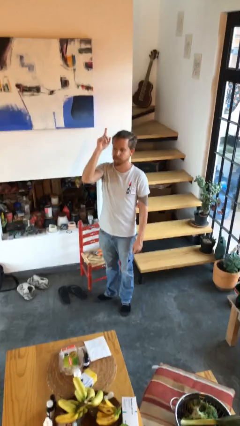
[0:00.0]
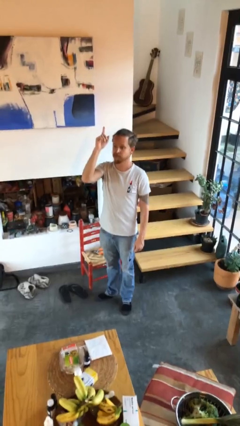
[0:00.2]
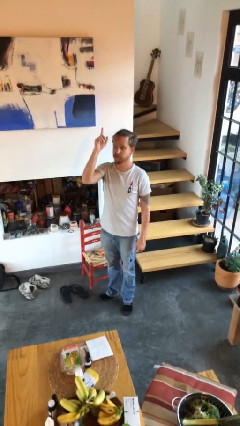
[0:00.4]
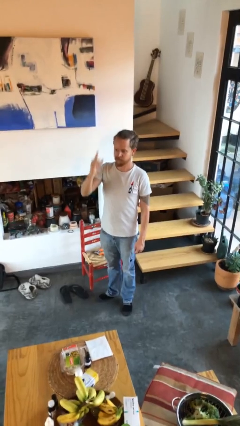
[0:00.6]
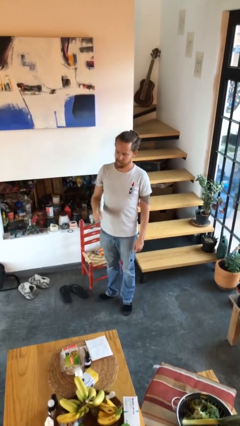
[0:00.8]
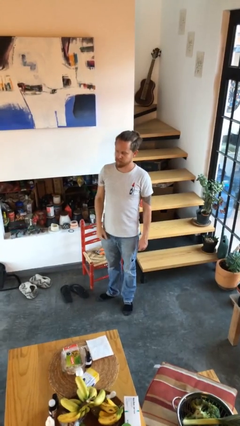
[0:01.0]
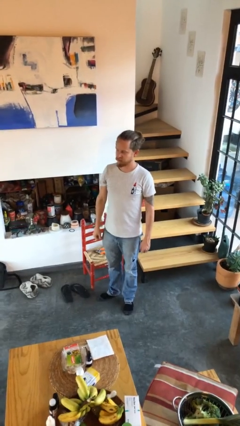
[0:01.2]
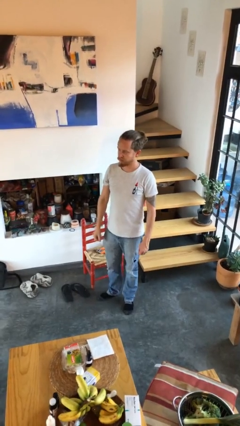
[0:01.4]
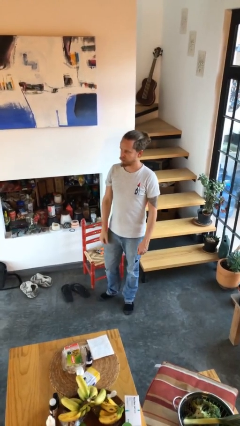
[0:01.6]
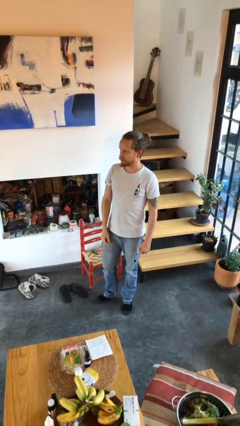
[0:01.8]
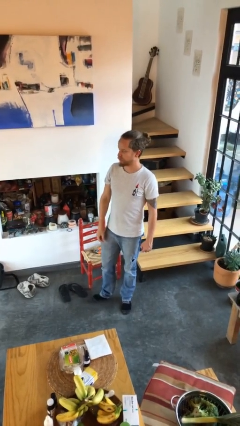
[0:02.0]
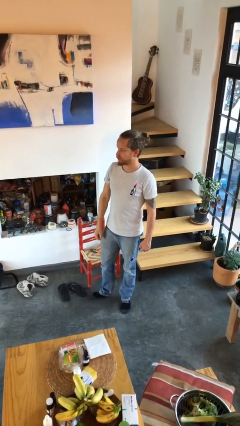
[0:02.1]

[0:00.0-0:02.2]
person gestures lower hand

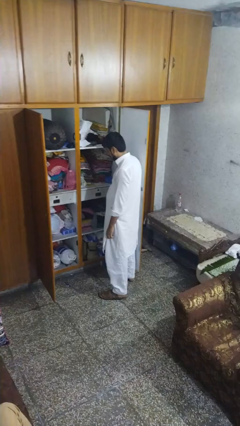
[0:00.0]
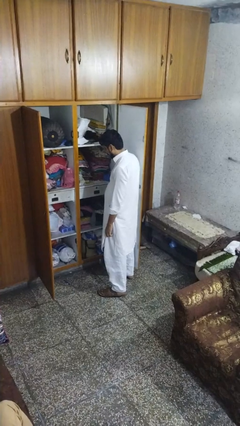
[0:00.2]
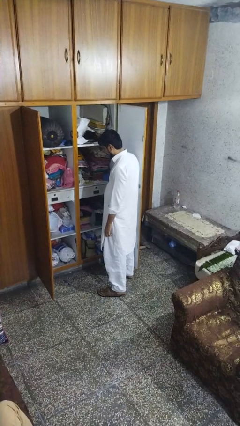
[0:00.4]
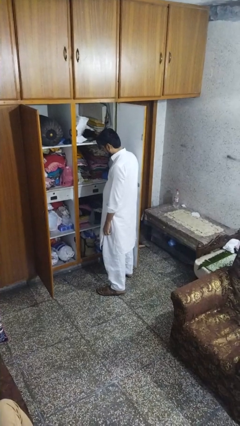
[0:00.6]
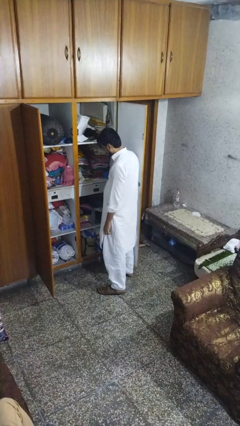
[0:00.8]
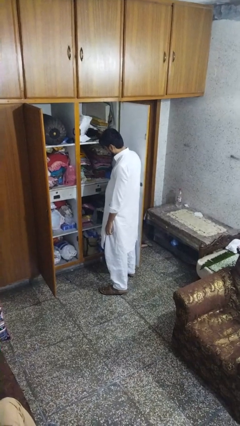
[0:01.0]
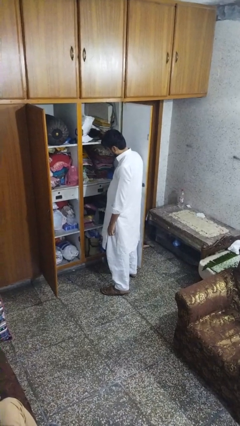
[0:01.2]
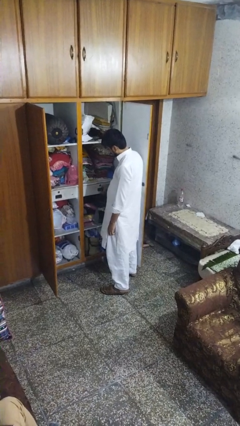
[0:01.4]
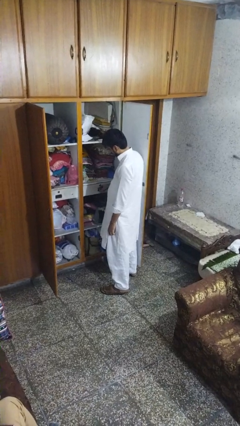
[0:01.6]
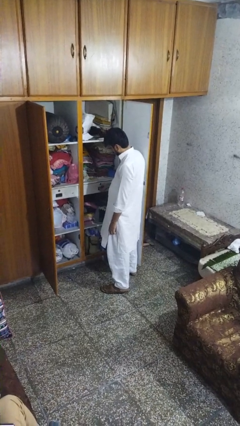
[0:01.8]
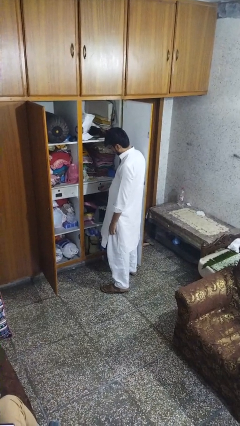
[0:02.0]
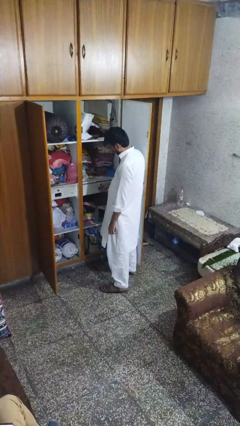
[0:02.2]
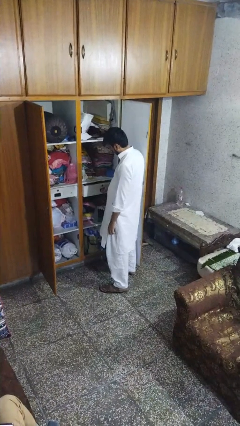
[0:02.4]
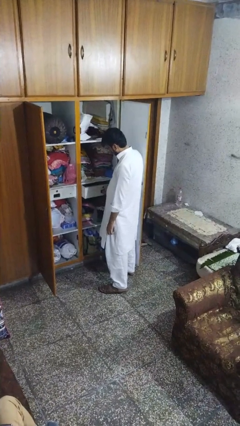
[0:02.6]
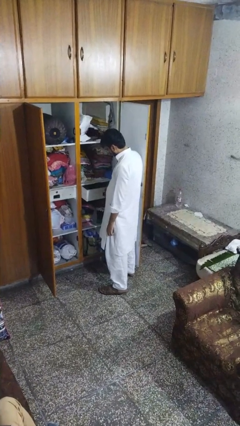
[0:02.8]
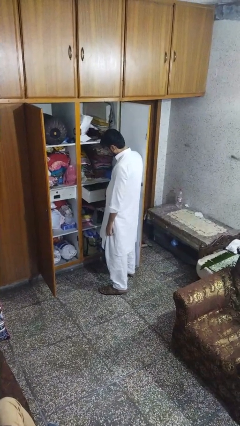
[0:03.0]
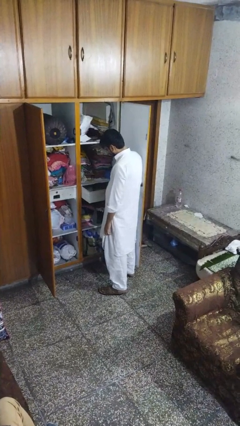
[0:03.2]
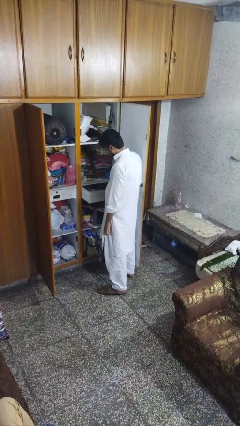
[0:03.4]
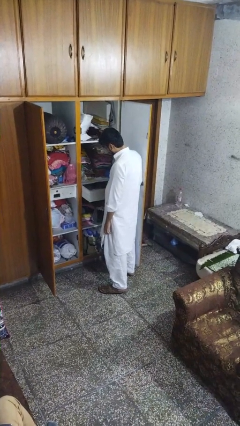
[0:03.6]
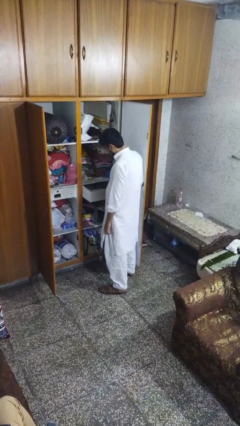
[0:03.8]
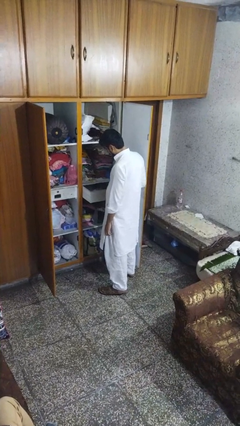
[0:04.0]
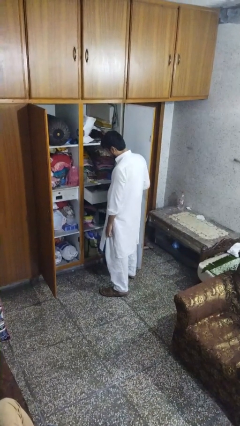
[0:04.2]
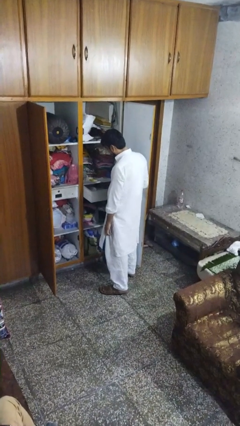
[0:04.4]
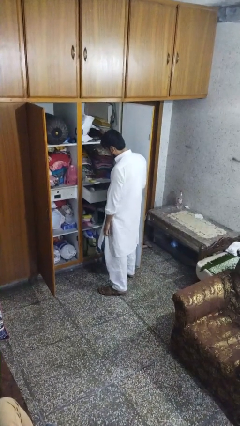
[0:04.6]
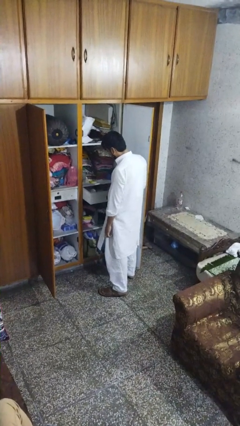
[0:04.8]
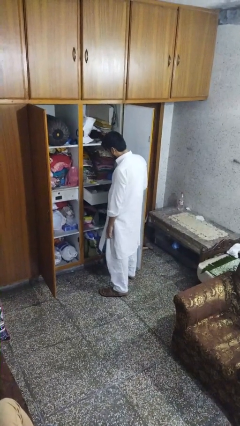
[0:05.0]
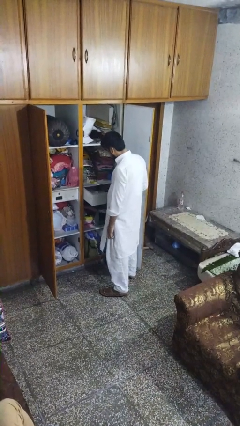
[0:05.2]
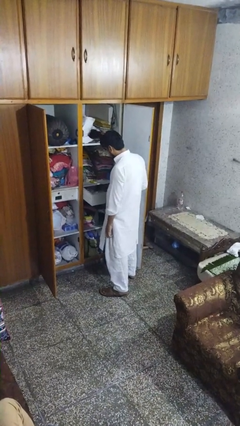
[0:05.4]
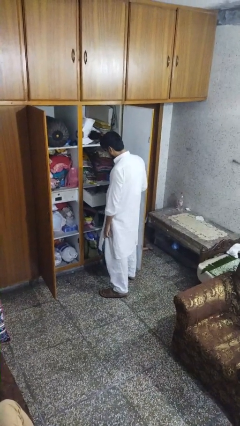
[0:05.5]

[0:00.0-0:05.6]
person opens dresser drawer

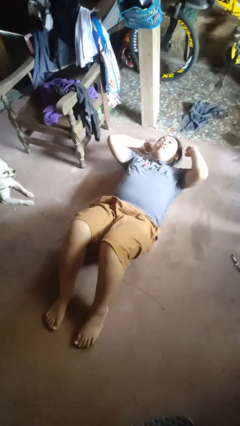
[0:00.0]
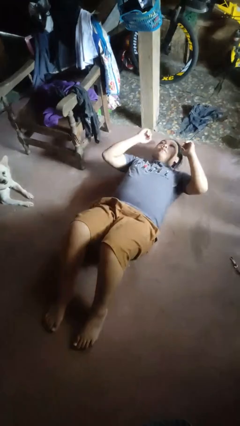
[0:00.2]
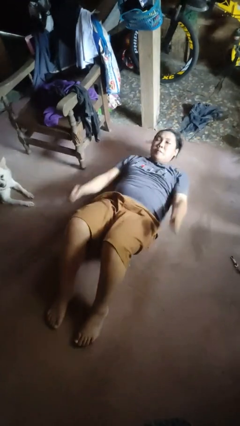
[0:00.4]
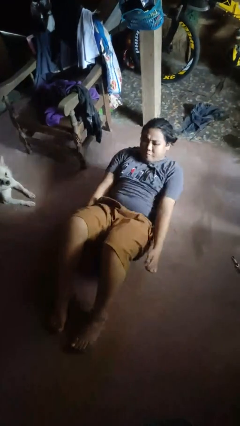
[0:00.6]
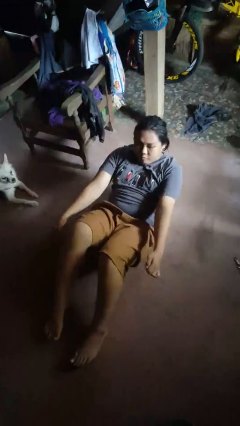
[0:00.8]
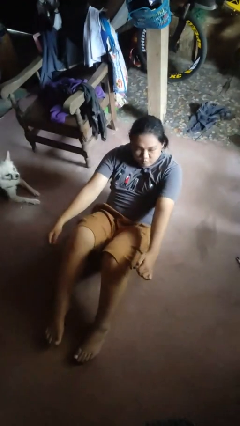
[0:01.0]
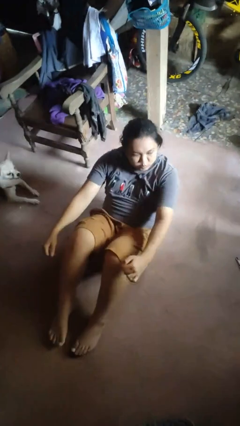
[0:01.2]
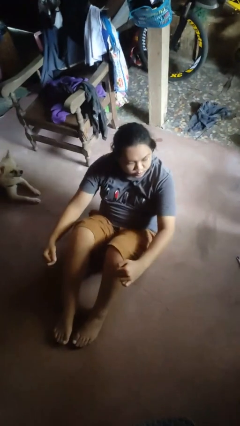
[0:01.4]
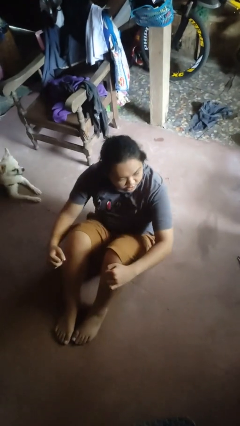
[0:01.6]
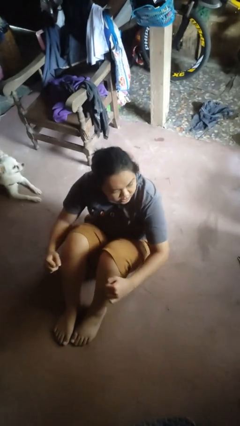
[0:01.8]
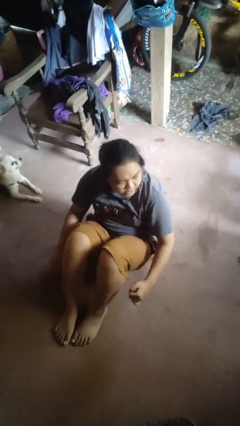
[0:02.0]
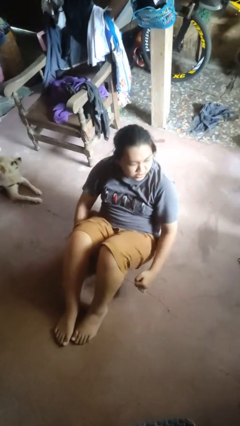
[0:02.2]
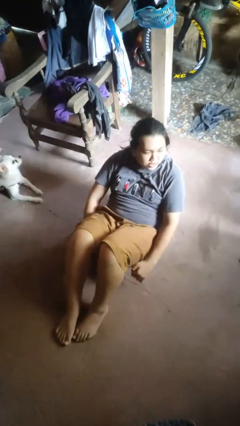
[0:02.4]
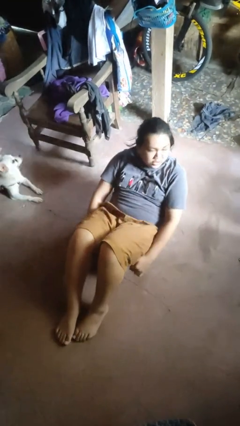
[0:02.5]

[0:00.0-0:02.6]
person exercises with situp

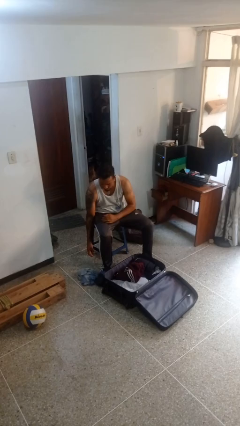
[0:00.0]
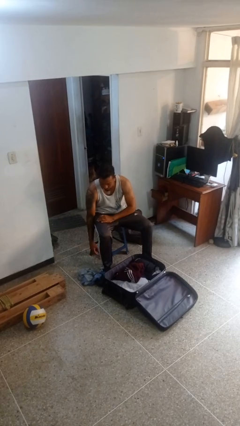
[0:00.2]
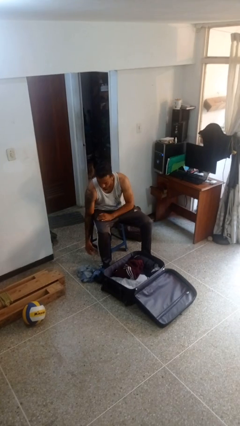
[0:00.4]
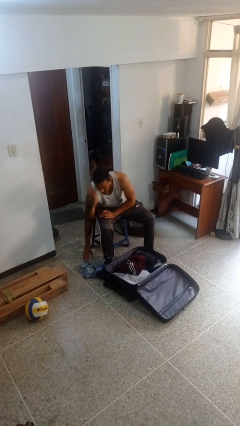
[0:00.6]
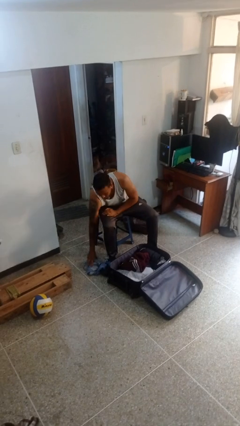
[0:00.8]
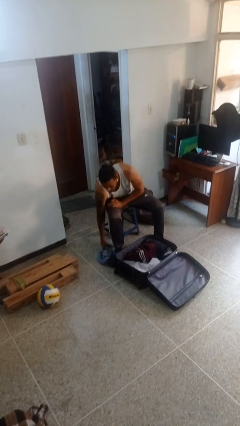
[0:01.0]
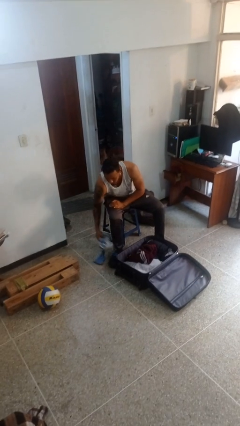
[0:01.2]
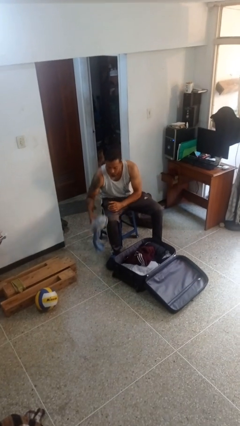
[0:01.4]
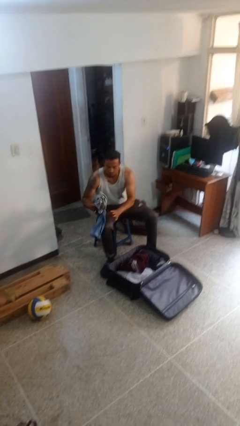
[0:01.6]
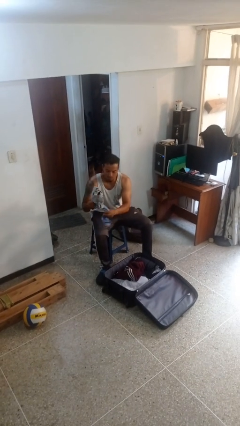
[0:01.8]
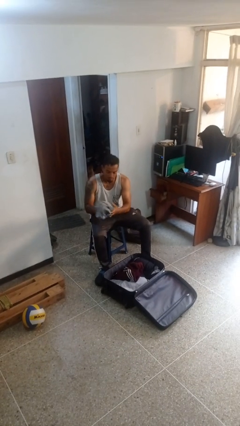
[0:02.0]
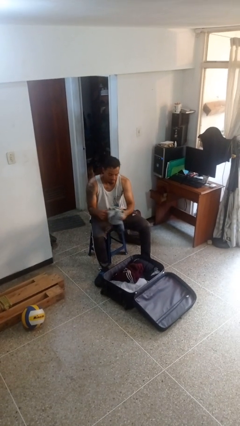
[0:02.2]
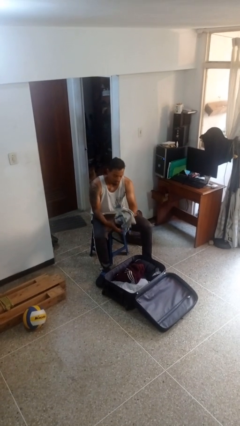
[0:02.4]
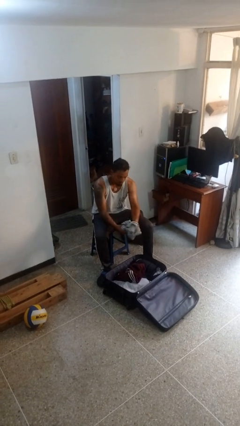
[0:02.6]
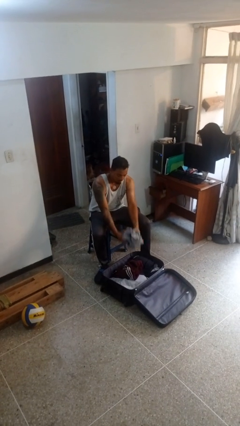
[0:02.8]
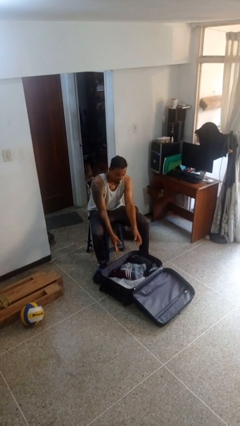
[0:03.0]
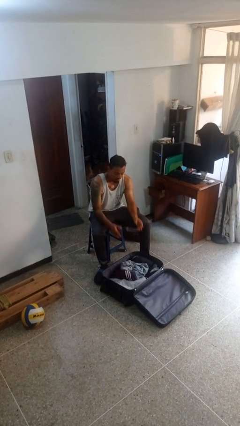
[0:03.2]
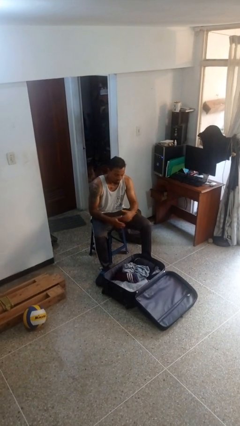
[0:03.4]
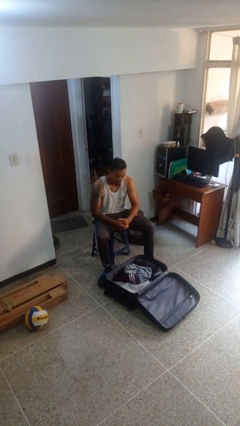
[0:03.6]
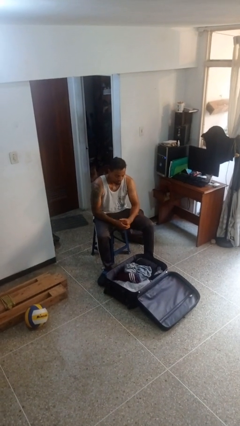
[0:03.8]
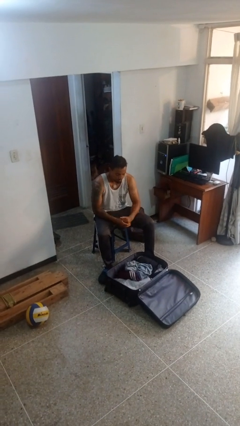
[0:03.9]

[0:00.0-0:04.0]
person loads clothes into suitcase

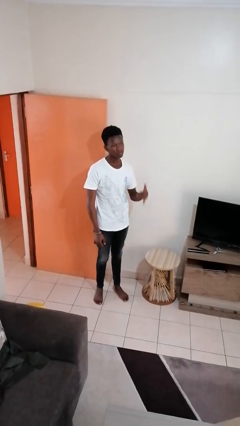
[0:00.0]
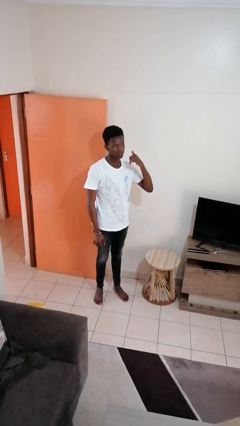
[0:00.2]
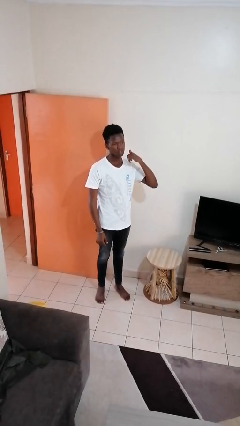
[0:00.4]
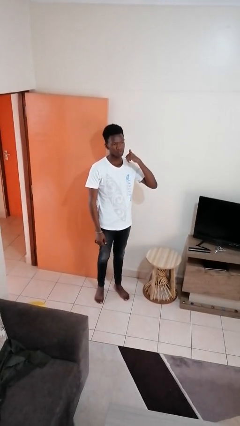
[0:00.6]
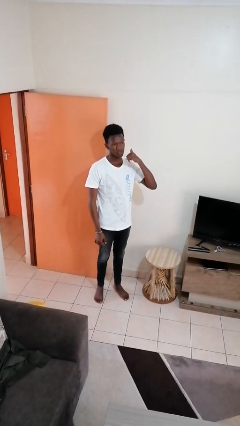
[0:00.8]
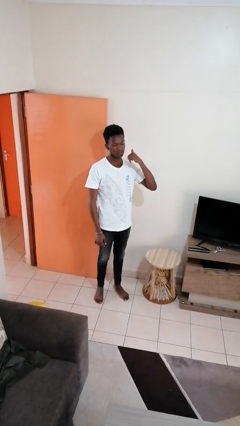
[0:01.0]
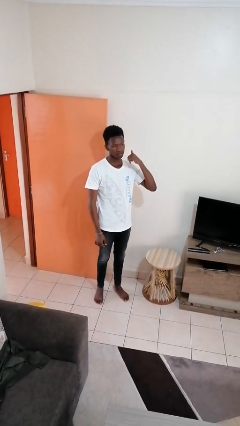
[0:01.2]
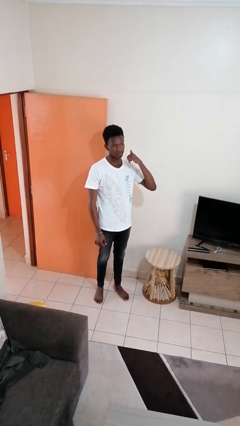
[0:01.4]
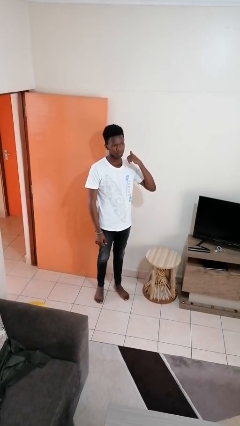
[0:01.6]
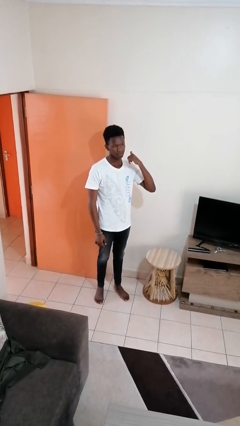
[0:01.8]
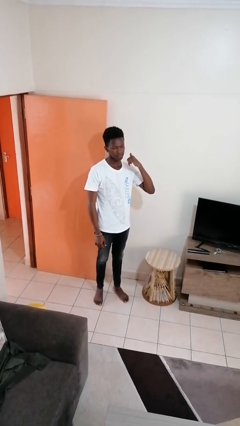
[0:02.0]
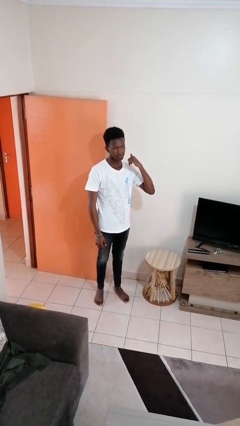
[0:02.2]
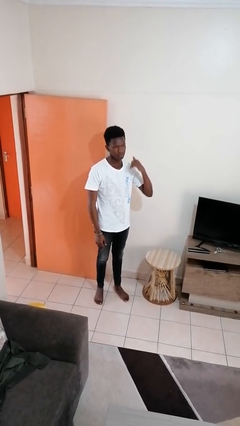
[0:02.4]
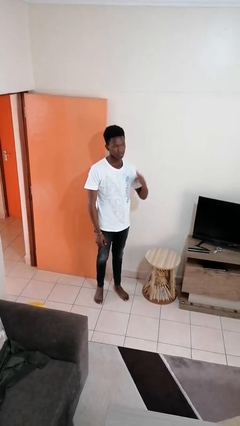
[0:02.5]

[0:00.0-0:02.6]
person gestures call me

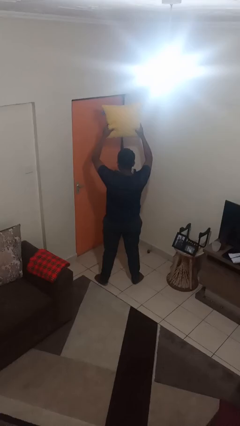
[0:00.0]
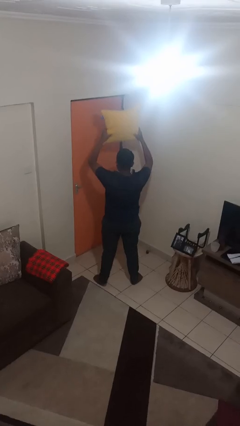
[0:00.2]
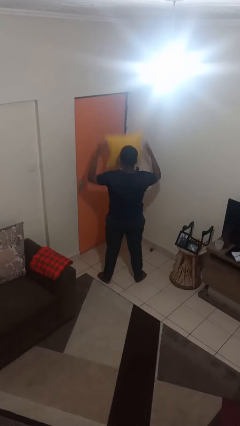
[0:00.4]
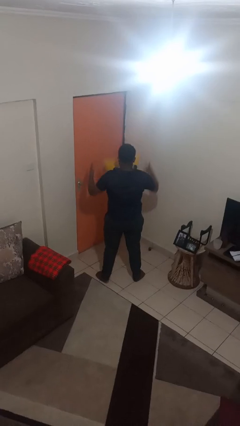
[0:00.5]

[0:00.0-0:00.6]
person drops object

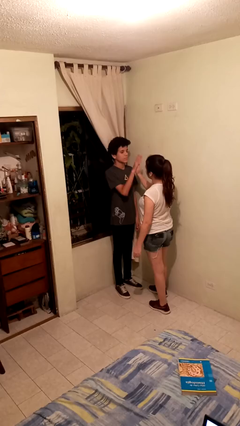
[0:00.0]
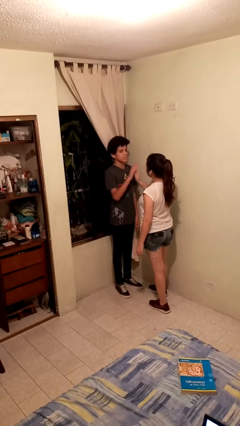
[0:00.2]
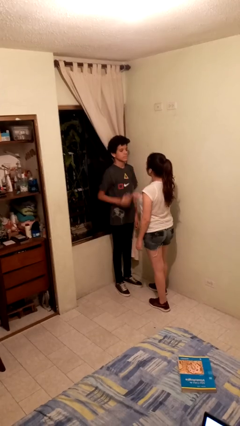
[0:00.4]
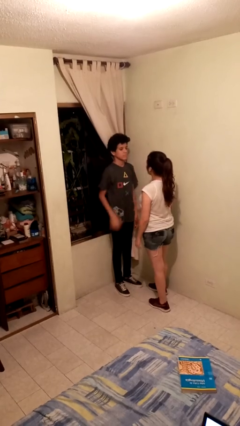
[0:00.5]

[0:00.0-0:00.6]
person highfives hand
